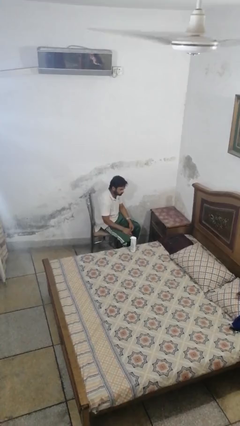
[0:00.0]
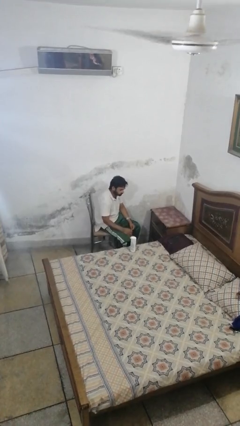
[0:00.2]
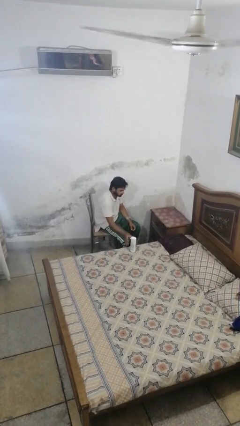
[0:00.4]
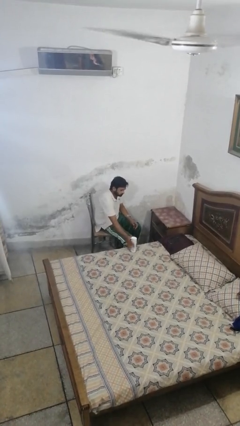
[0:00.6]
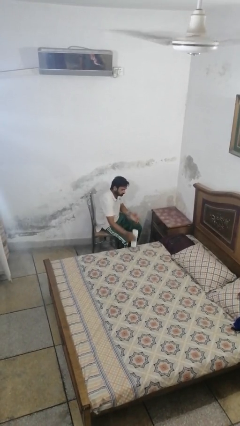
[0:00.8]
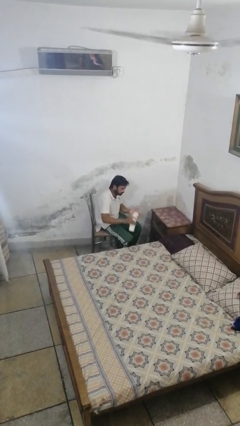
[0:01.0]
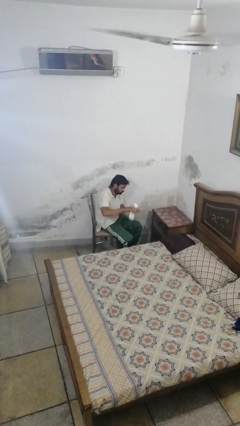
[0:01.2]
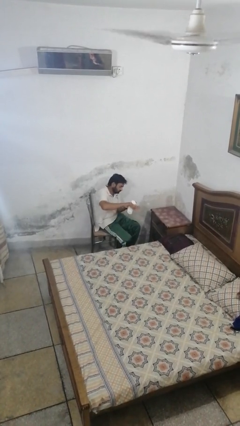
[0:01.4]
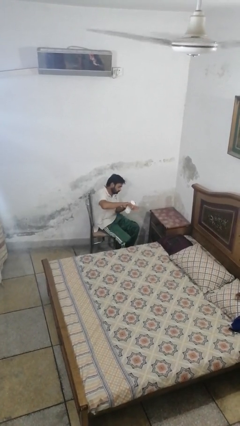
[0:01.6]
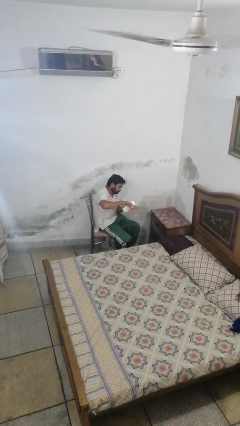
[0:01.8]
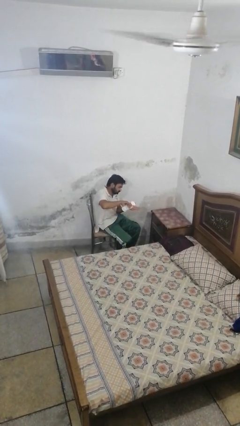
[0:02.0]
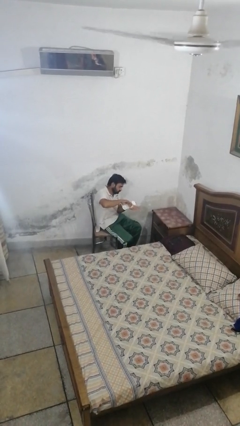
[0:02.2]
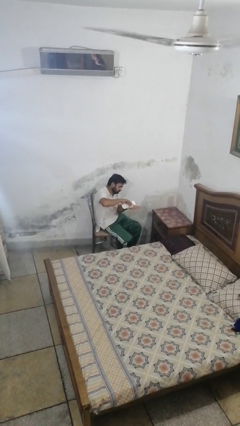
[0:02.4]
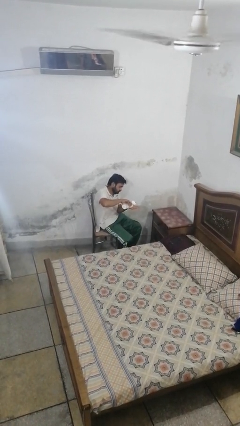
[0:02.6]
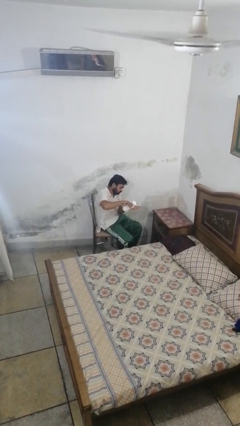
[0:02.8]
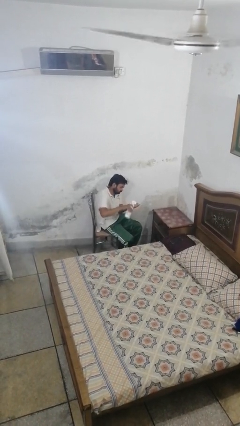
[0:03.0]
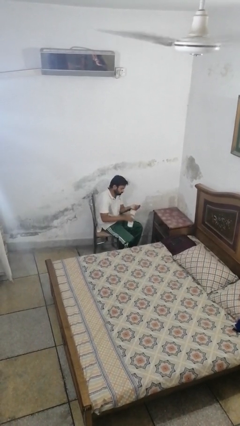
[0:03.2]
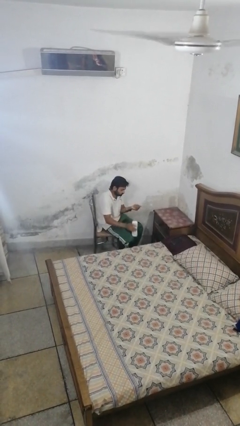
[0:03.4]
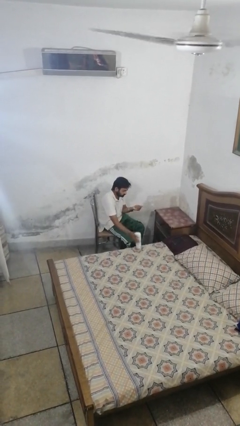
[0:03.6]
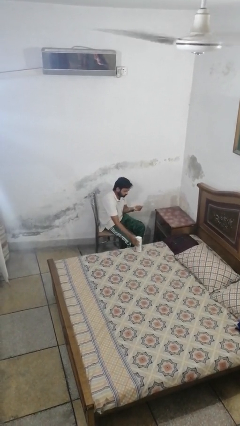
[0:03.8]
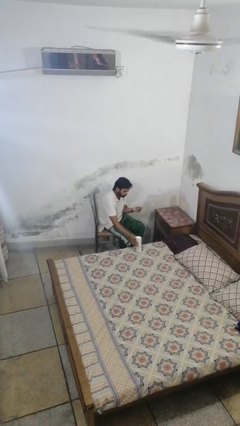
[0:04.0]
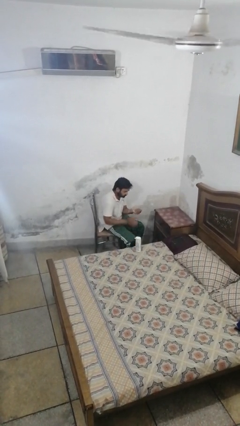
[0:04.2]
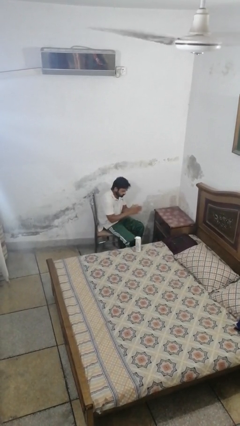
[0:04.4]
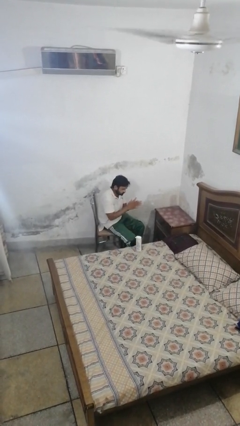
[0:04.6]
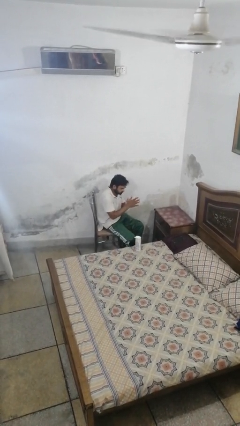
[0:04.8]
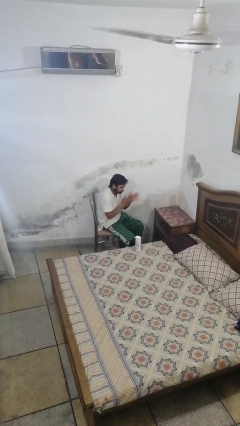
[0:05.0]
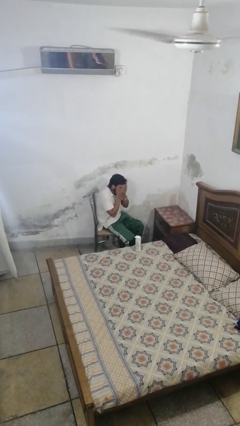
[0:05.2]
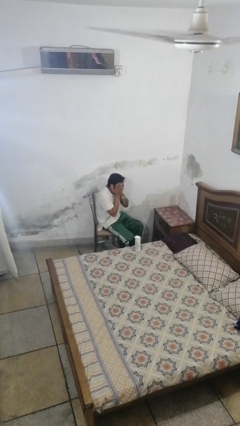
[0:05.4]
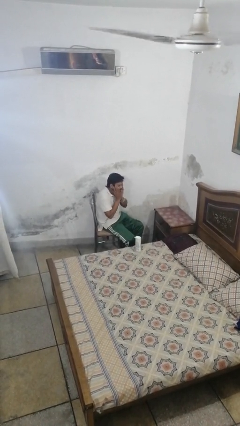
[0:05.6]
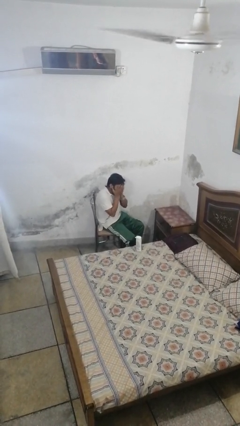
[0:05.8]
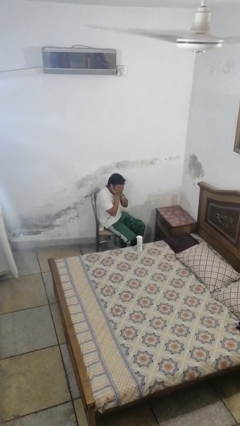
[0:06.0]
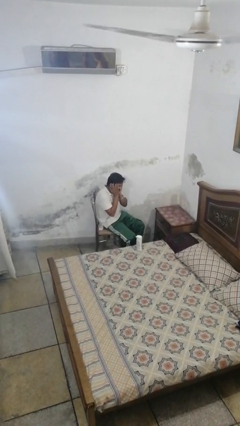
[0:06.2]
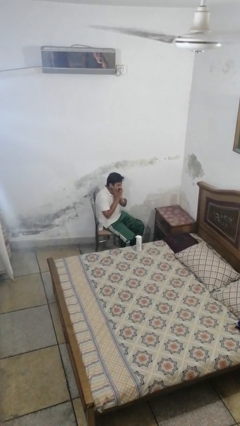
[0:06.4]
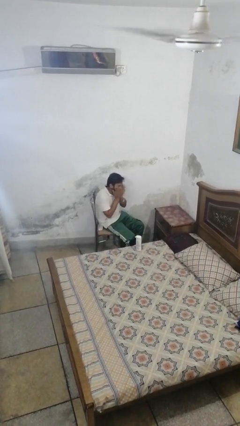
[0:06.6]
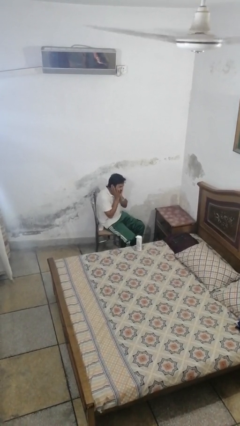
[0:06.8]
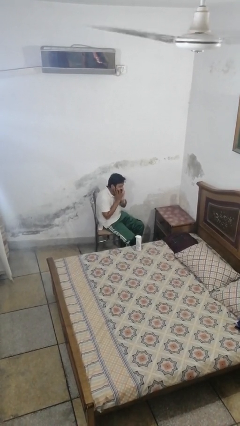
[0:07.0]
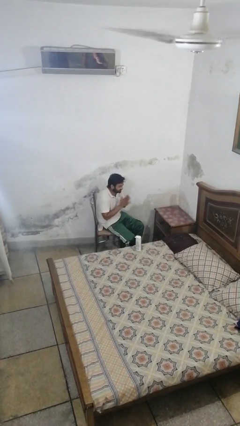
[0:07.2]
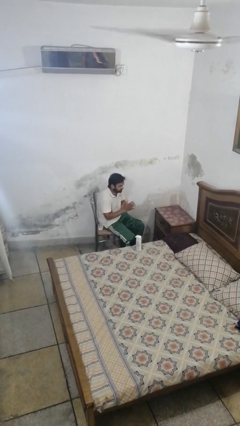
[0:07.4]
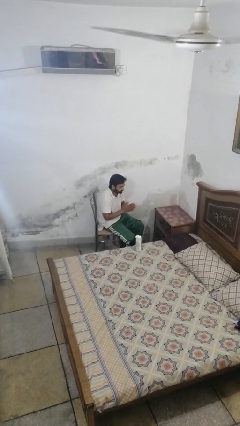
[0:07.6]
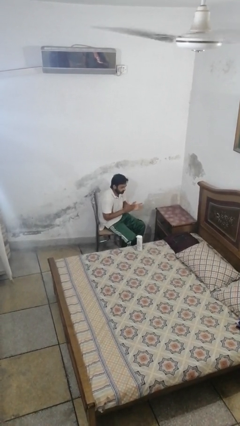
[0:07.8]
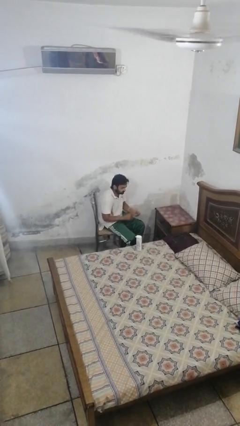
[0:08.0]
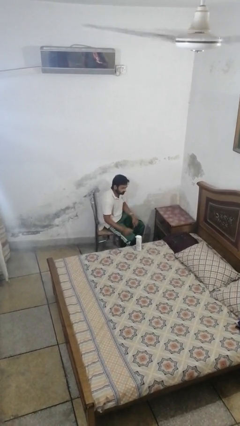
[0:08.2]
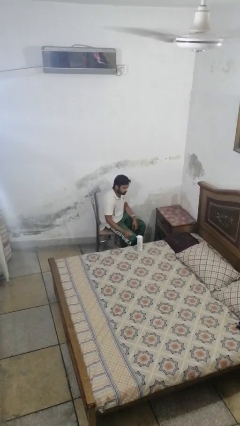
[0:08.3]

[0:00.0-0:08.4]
person applies facial moisturizer

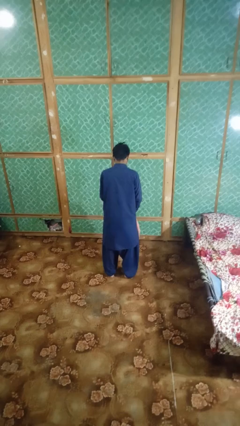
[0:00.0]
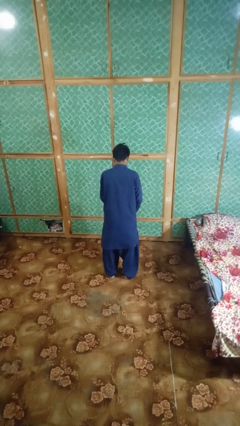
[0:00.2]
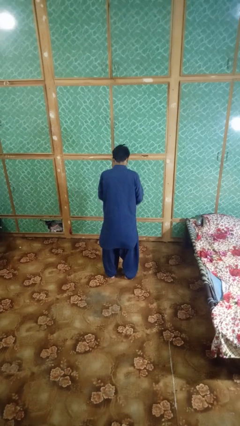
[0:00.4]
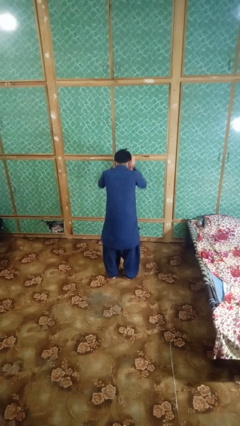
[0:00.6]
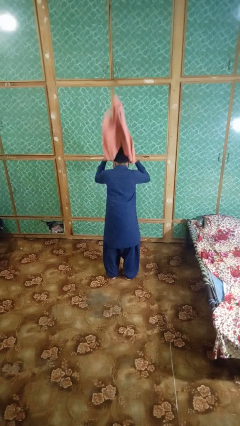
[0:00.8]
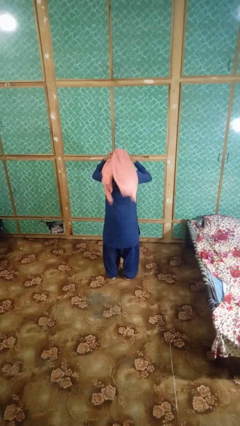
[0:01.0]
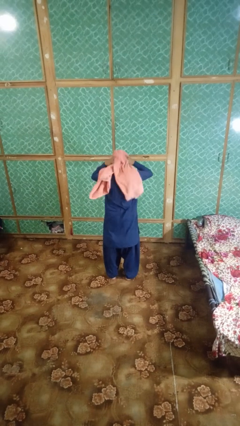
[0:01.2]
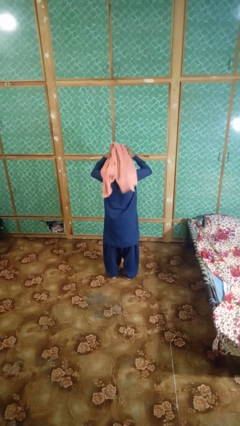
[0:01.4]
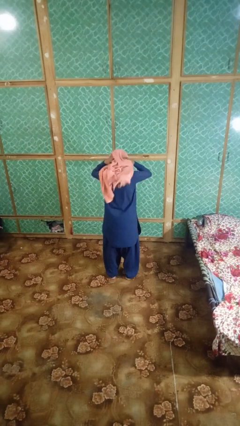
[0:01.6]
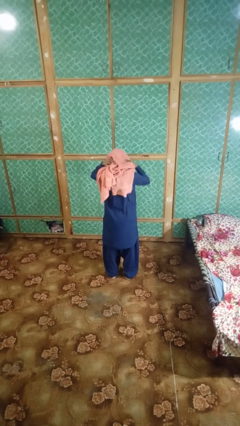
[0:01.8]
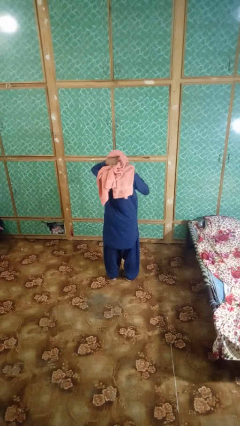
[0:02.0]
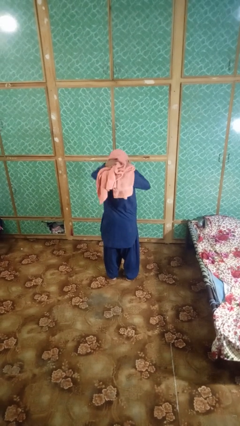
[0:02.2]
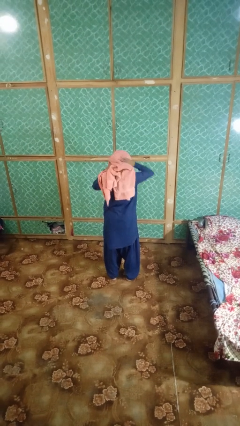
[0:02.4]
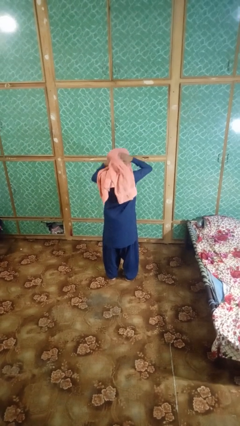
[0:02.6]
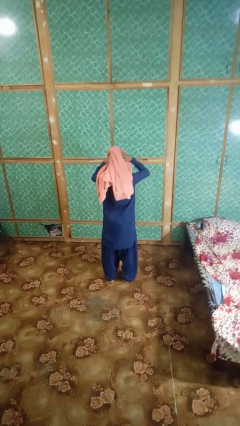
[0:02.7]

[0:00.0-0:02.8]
person dries hair with towel

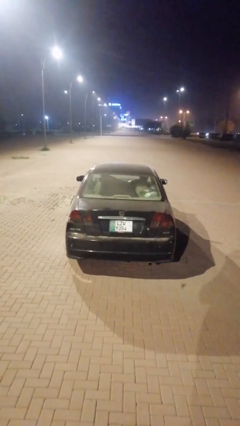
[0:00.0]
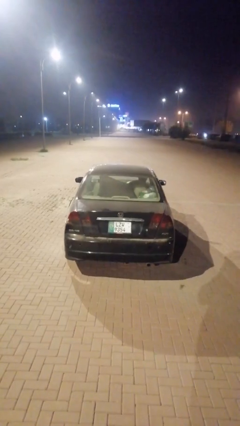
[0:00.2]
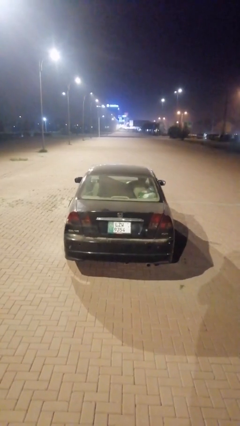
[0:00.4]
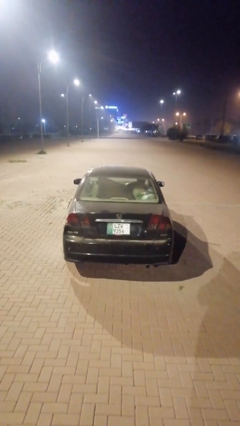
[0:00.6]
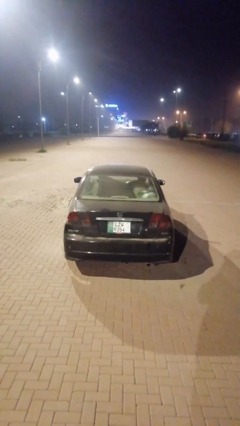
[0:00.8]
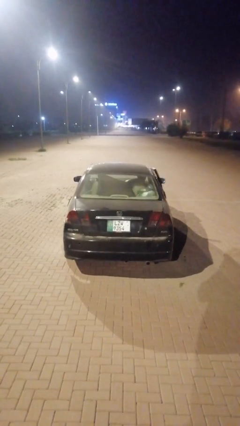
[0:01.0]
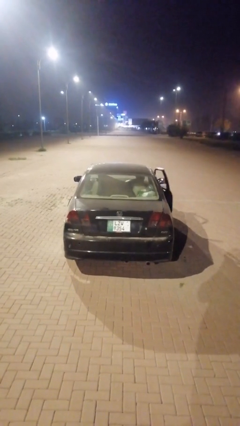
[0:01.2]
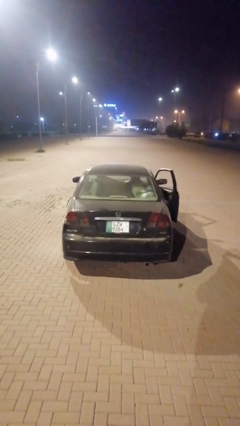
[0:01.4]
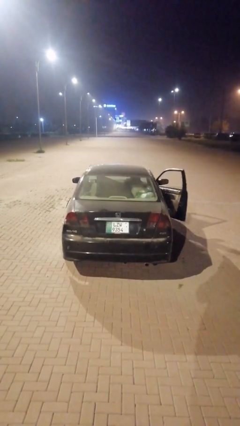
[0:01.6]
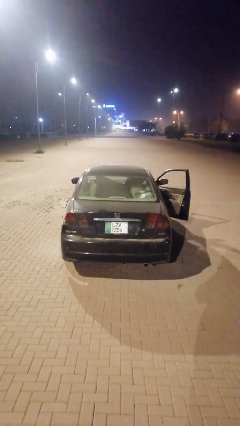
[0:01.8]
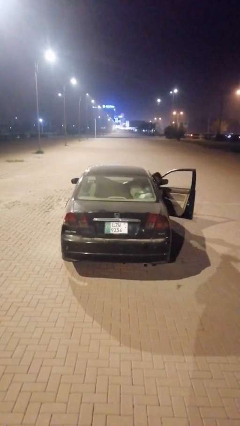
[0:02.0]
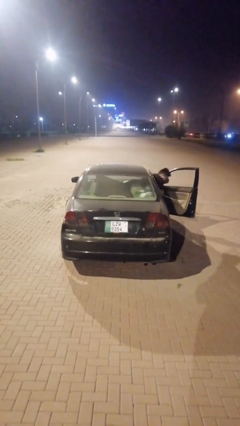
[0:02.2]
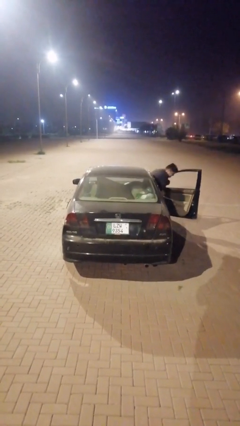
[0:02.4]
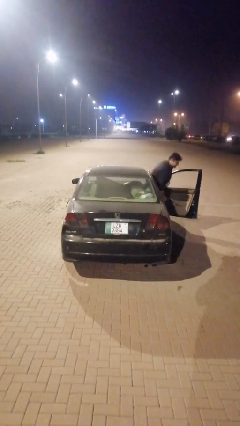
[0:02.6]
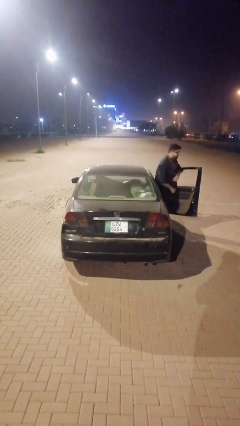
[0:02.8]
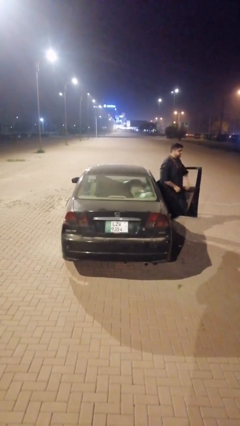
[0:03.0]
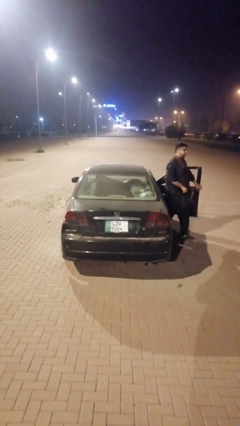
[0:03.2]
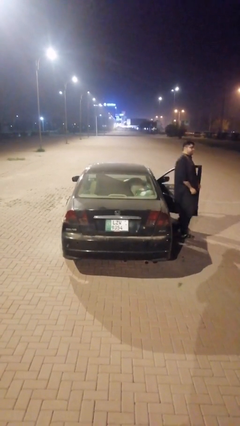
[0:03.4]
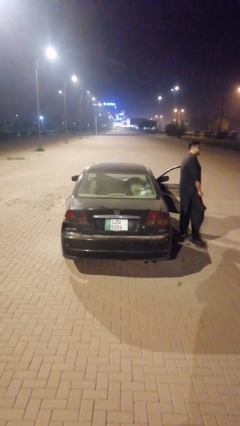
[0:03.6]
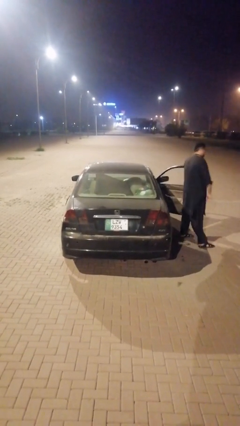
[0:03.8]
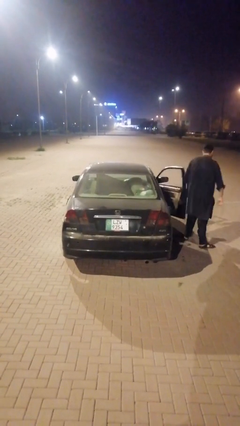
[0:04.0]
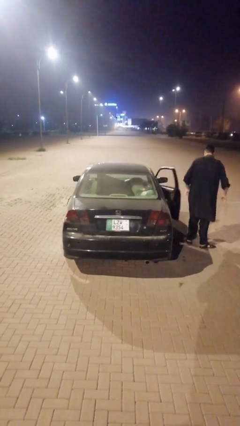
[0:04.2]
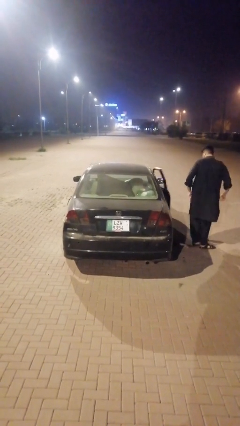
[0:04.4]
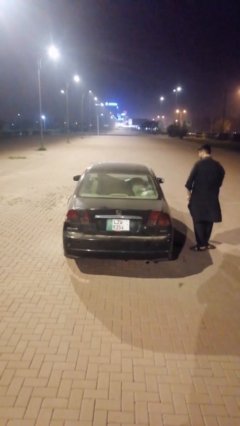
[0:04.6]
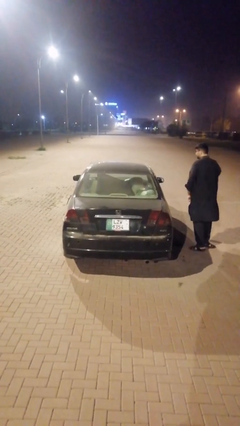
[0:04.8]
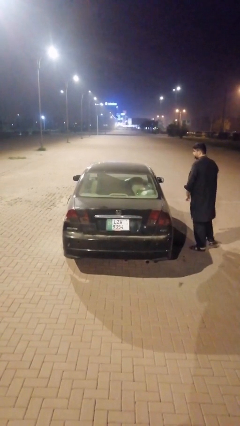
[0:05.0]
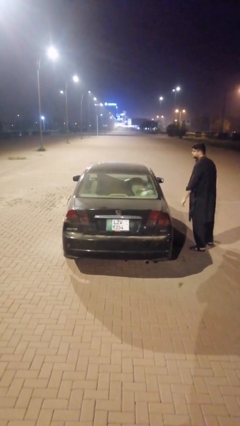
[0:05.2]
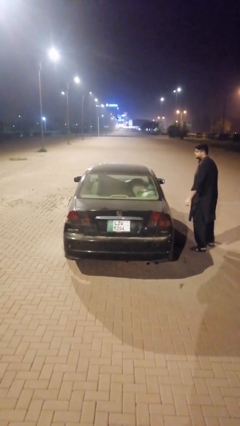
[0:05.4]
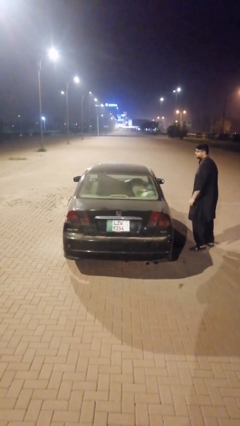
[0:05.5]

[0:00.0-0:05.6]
car drops off person

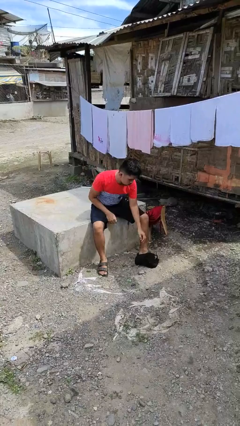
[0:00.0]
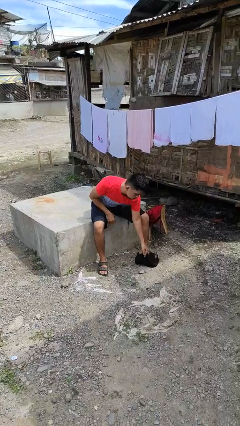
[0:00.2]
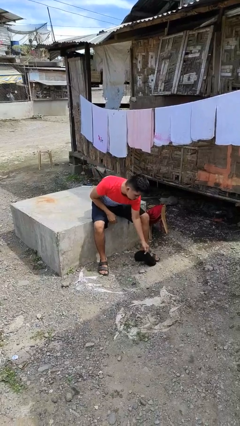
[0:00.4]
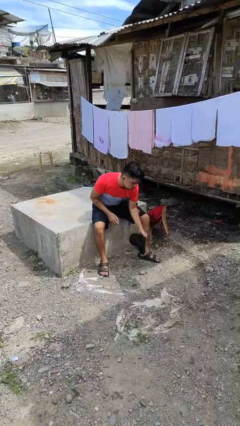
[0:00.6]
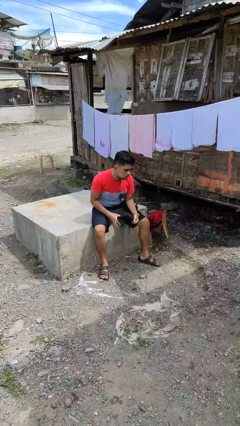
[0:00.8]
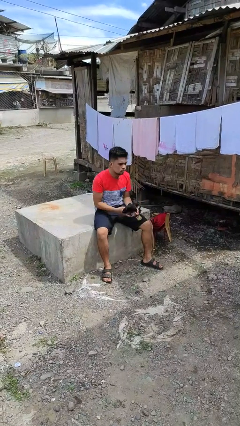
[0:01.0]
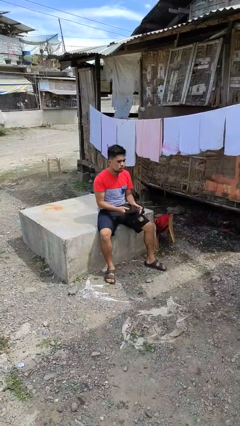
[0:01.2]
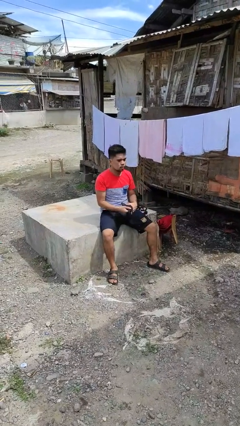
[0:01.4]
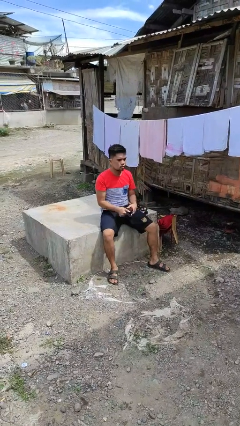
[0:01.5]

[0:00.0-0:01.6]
person picks up object from floor
